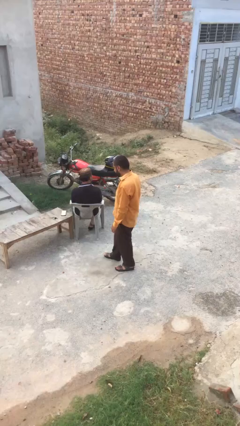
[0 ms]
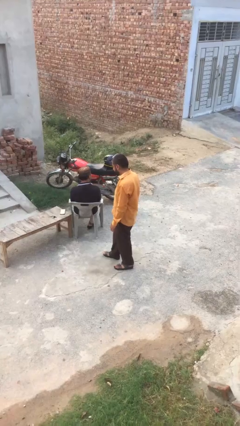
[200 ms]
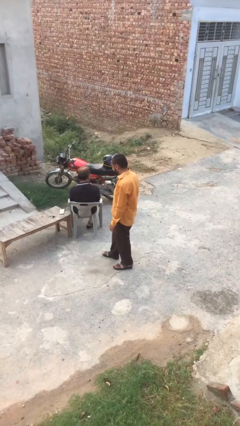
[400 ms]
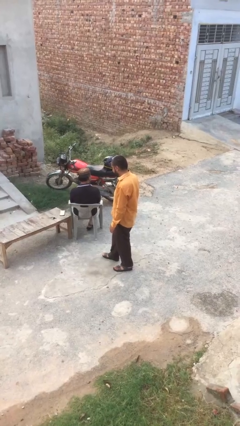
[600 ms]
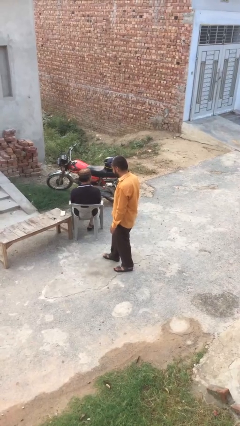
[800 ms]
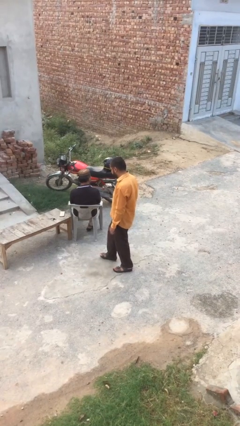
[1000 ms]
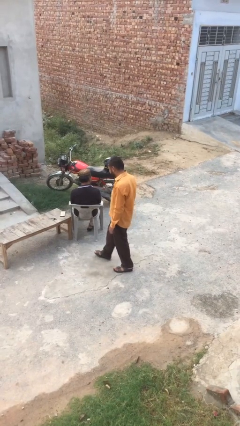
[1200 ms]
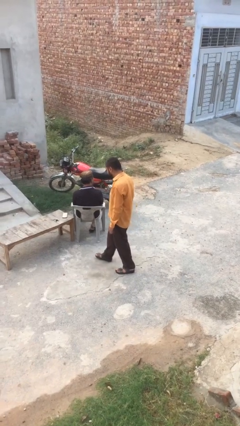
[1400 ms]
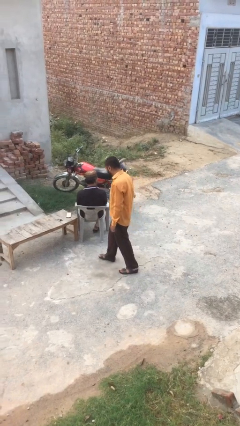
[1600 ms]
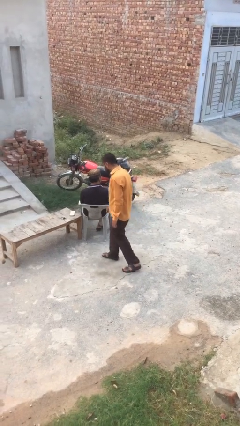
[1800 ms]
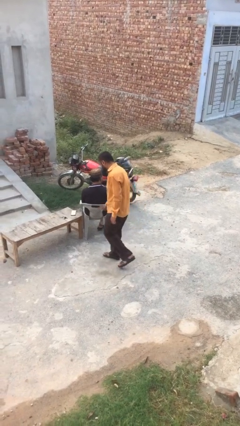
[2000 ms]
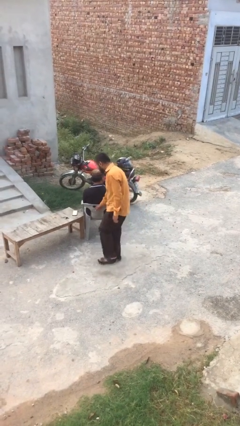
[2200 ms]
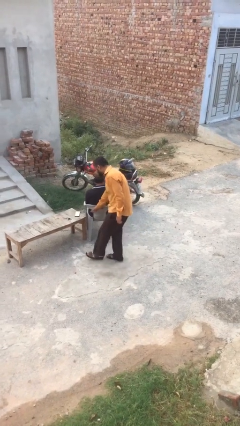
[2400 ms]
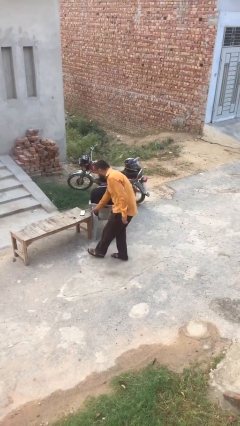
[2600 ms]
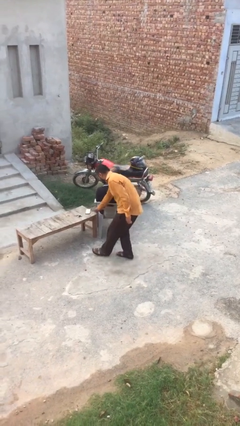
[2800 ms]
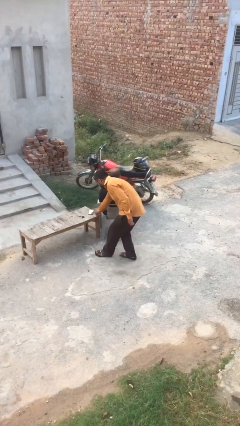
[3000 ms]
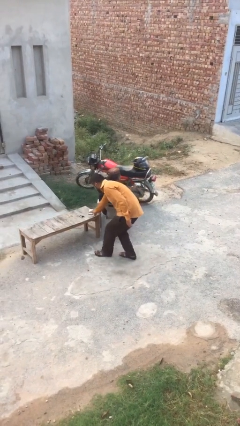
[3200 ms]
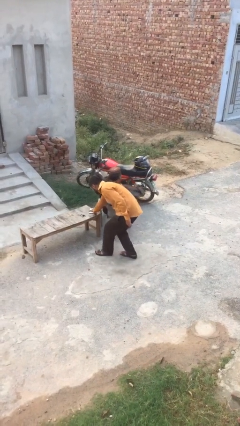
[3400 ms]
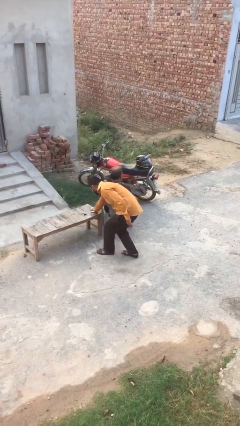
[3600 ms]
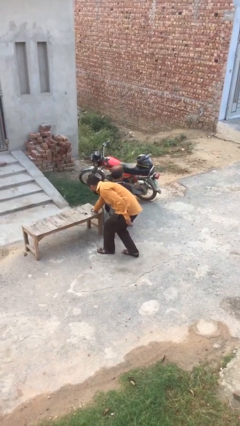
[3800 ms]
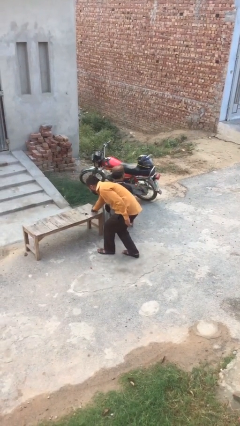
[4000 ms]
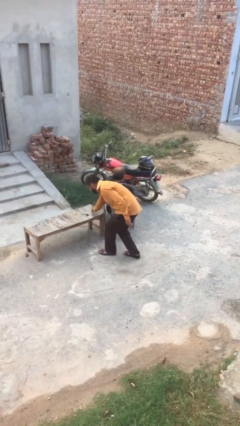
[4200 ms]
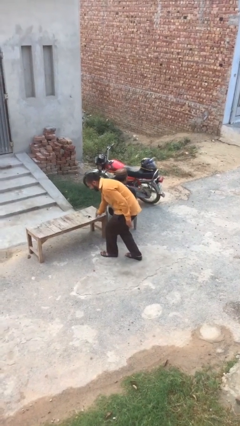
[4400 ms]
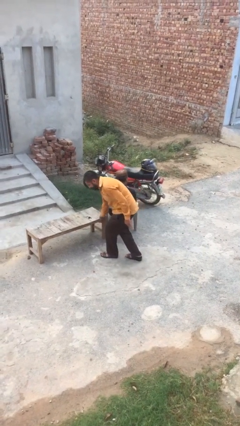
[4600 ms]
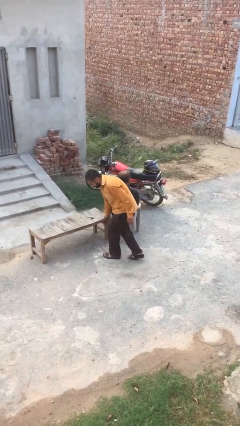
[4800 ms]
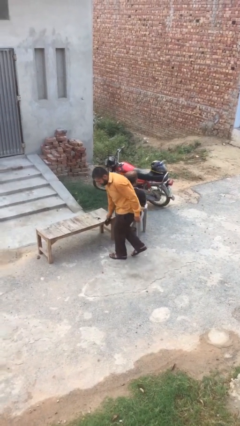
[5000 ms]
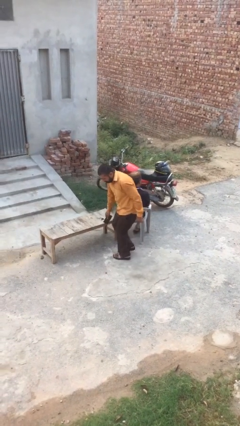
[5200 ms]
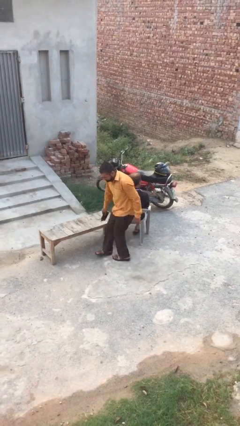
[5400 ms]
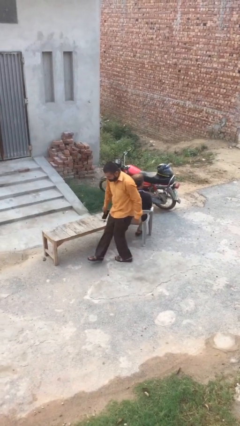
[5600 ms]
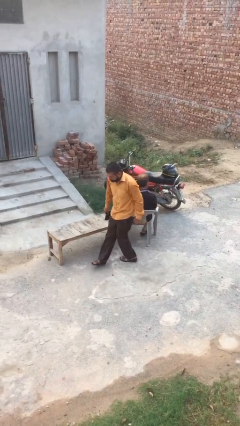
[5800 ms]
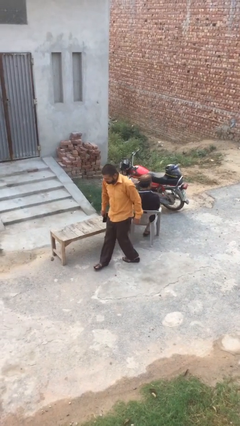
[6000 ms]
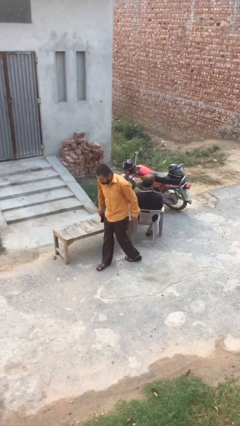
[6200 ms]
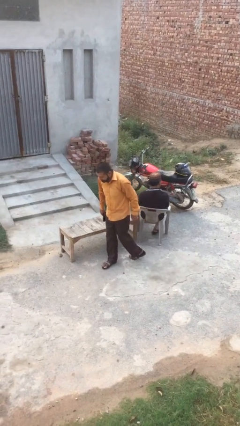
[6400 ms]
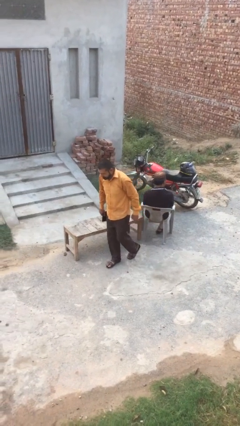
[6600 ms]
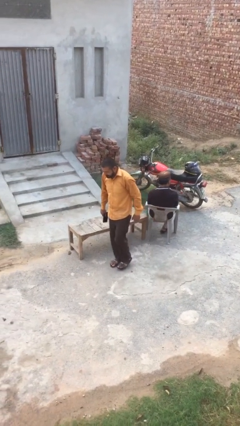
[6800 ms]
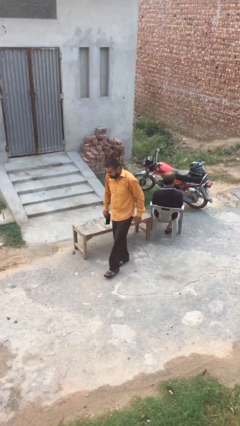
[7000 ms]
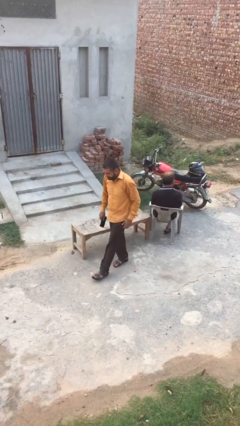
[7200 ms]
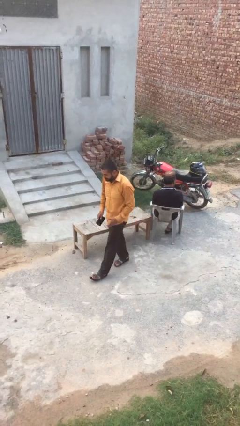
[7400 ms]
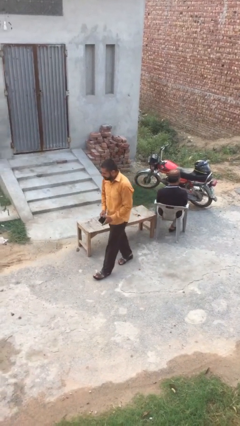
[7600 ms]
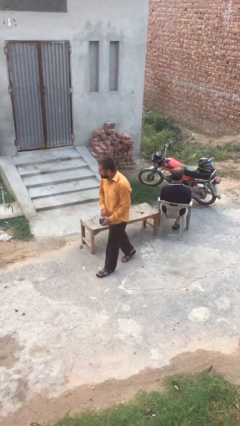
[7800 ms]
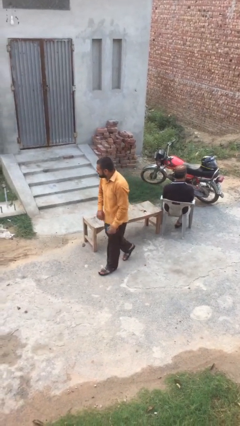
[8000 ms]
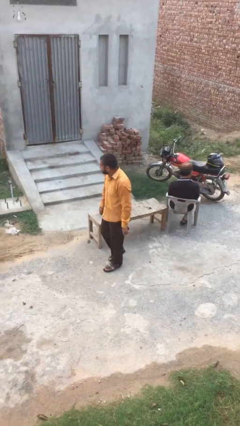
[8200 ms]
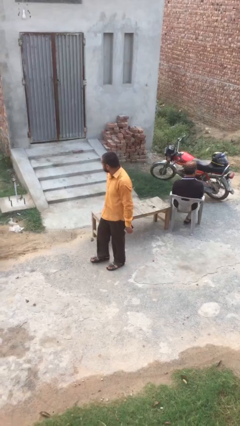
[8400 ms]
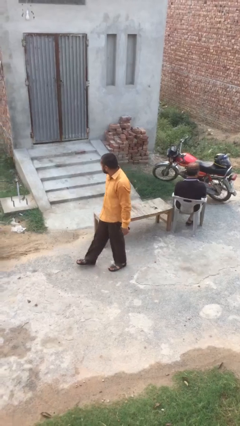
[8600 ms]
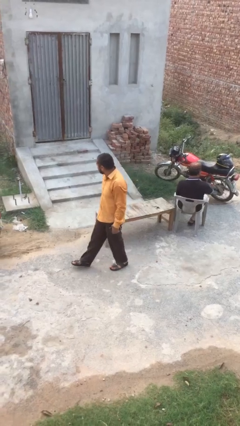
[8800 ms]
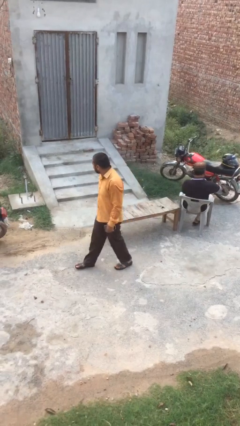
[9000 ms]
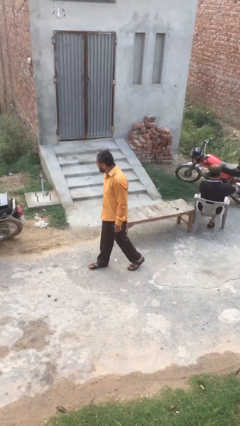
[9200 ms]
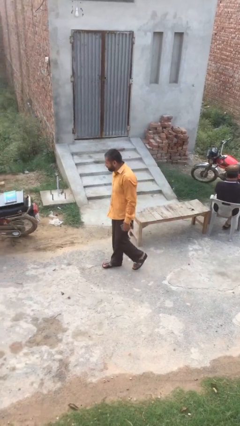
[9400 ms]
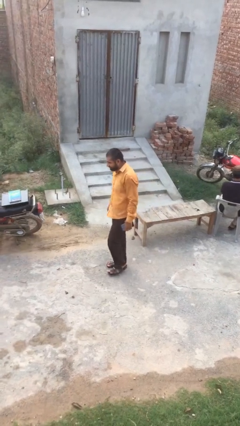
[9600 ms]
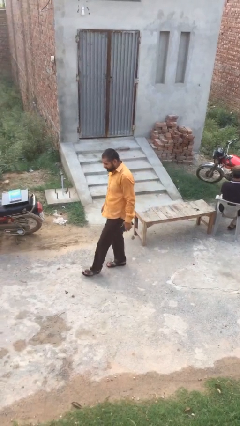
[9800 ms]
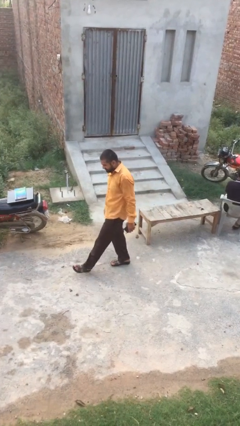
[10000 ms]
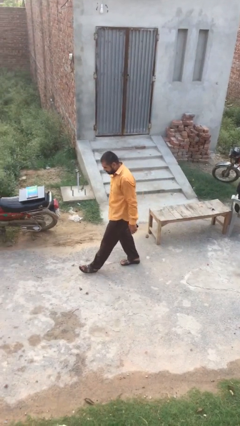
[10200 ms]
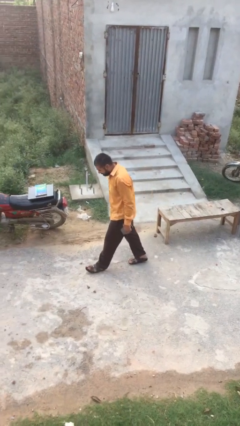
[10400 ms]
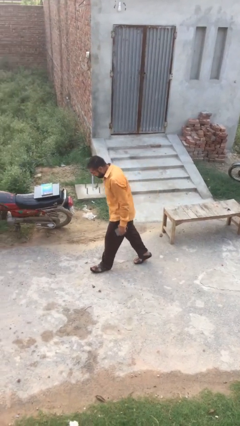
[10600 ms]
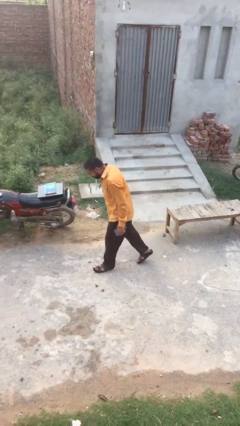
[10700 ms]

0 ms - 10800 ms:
person steals object from person

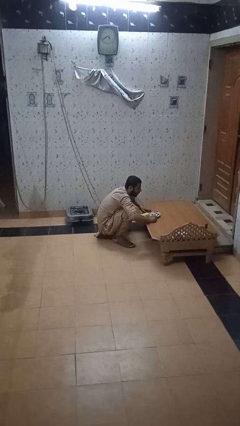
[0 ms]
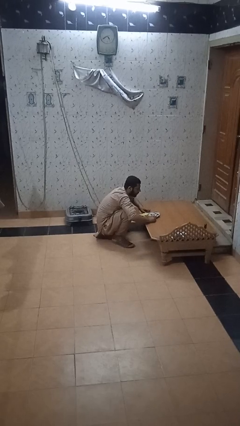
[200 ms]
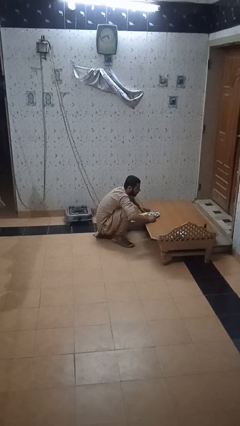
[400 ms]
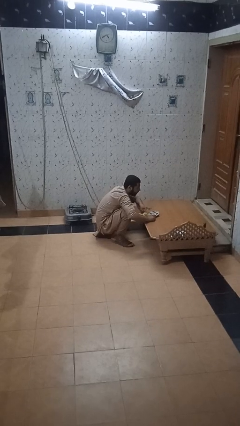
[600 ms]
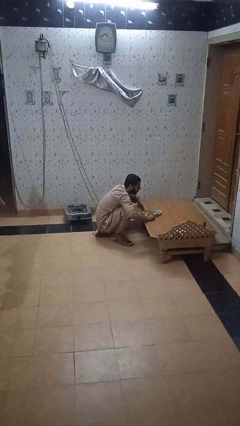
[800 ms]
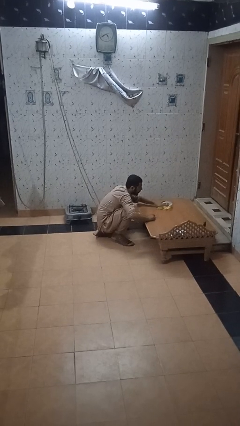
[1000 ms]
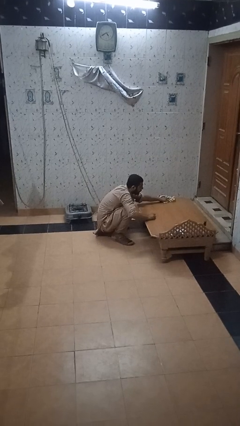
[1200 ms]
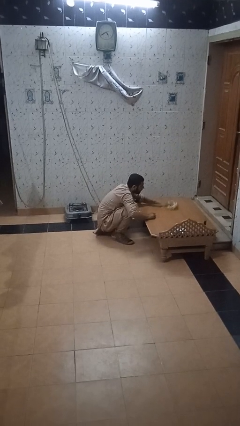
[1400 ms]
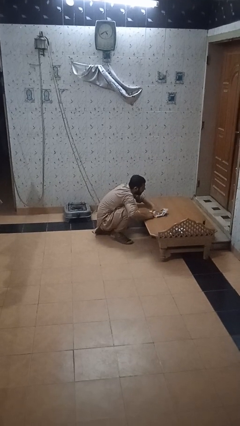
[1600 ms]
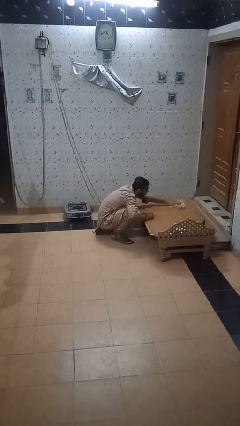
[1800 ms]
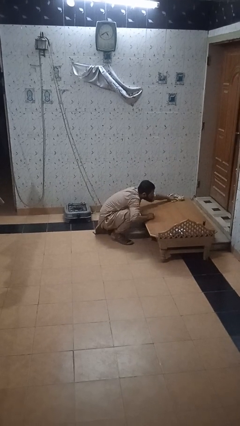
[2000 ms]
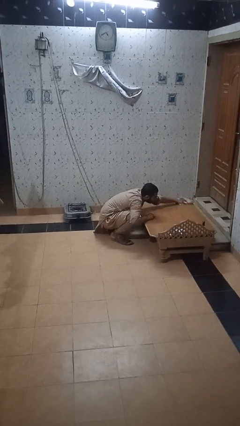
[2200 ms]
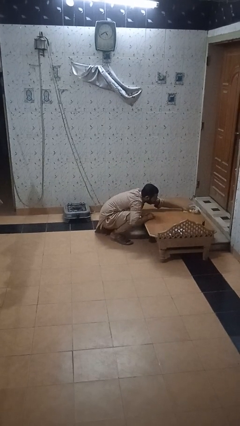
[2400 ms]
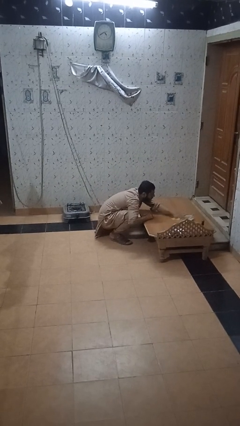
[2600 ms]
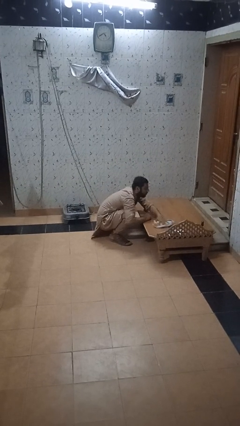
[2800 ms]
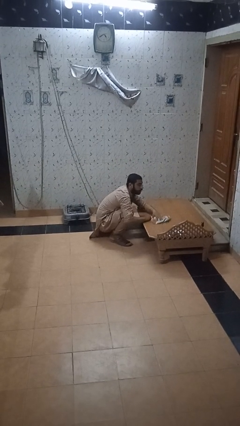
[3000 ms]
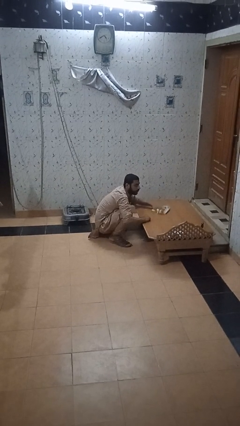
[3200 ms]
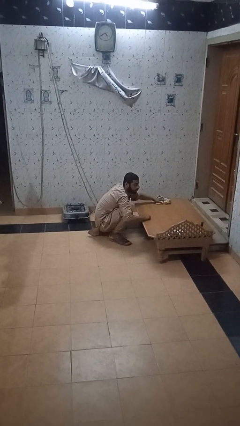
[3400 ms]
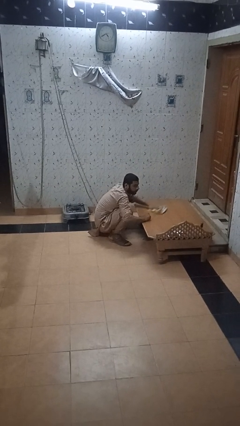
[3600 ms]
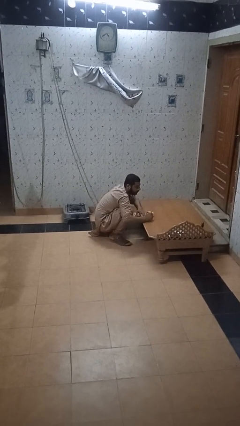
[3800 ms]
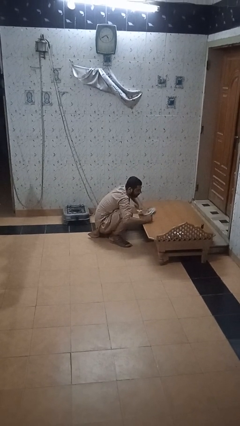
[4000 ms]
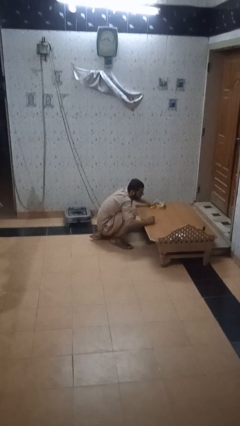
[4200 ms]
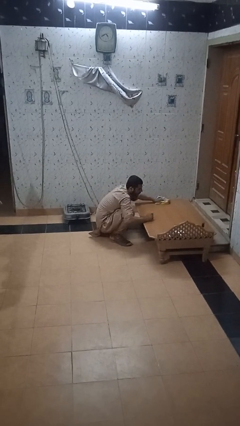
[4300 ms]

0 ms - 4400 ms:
person cleans table with rag

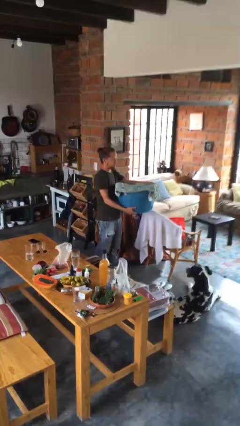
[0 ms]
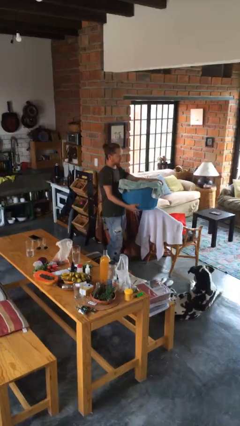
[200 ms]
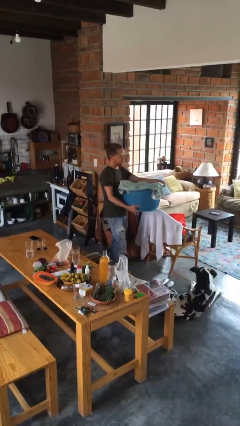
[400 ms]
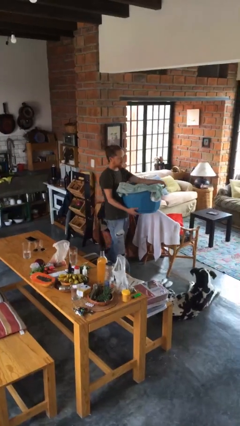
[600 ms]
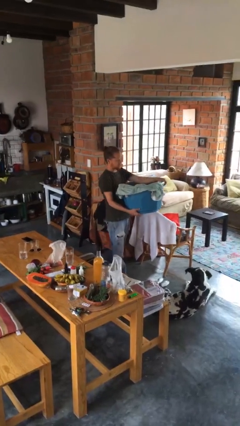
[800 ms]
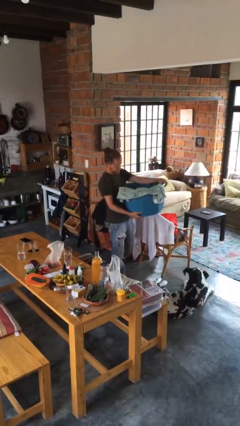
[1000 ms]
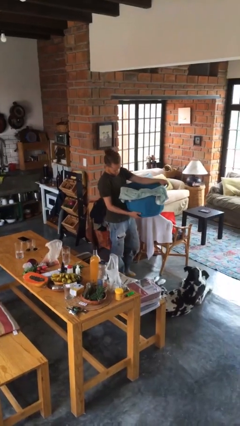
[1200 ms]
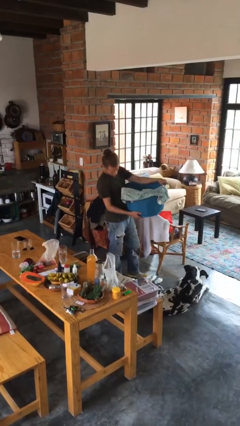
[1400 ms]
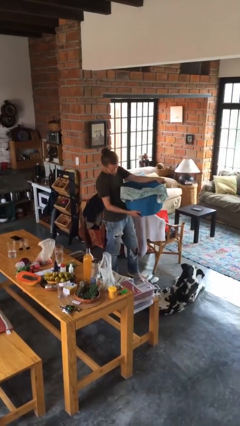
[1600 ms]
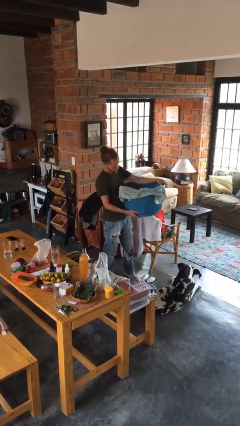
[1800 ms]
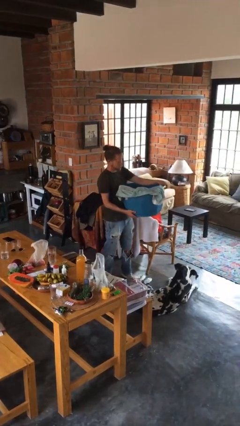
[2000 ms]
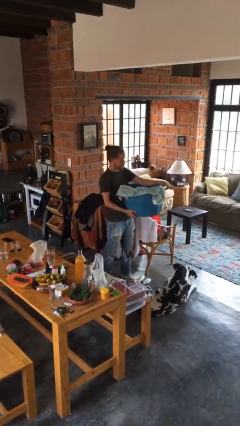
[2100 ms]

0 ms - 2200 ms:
person carries laundry basket

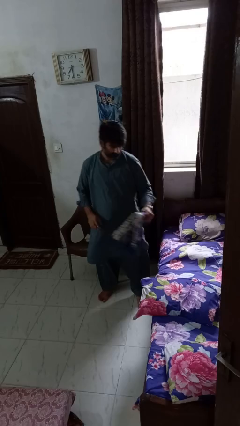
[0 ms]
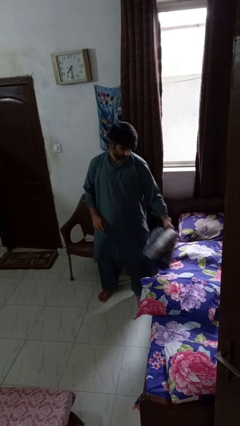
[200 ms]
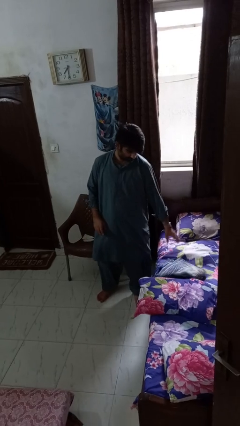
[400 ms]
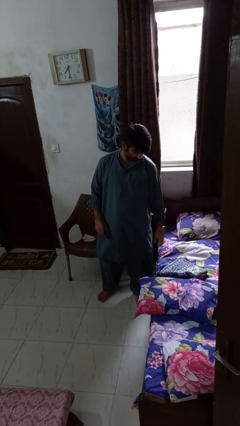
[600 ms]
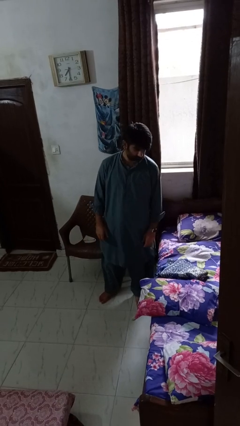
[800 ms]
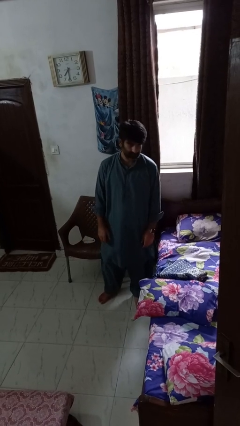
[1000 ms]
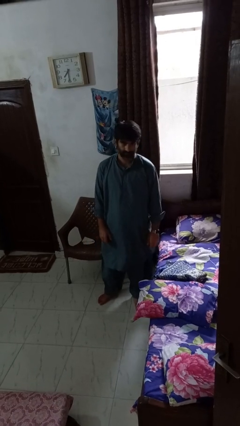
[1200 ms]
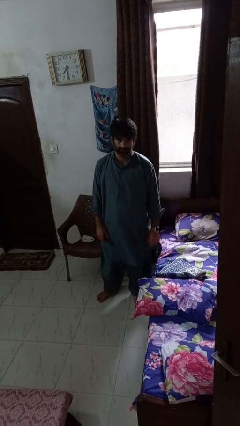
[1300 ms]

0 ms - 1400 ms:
person puts down object on bed
